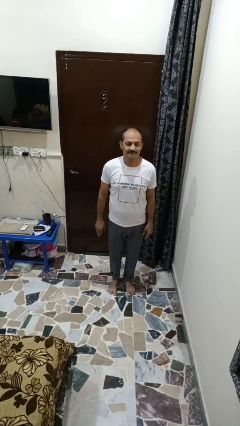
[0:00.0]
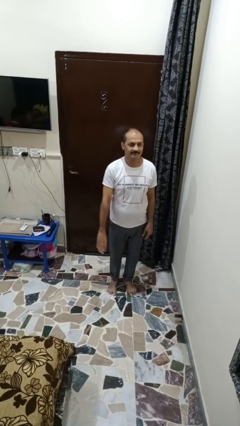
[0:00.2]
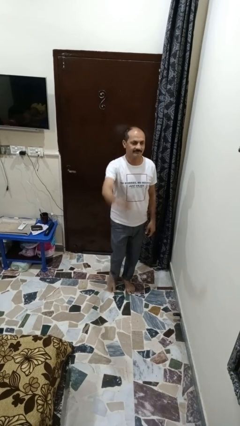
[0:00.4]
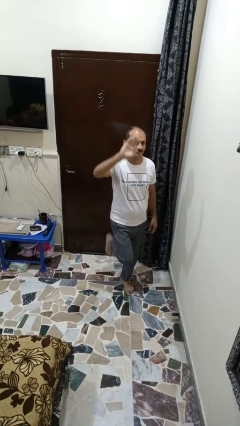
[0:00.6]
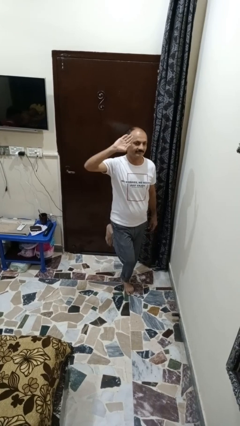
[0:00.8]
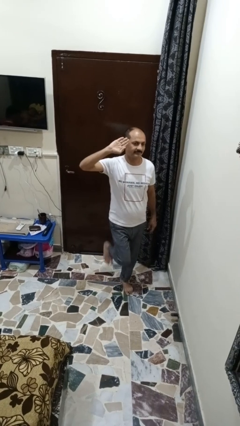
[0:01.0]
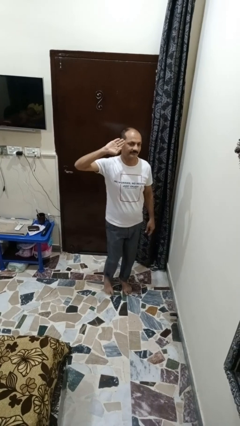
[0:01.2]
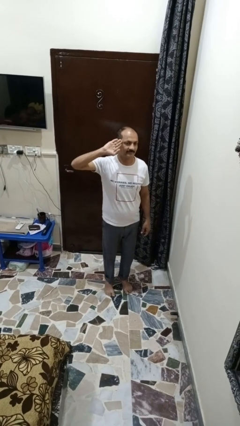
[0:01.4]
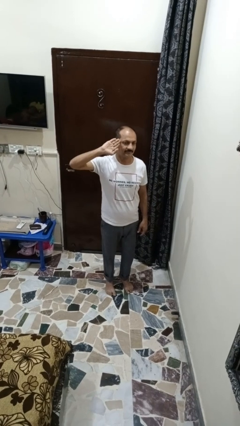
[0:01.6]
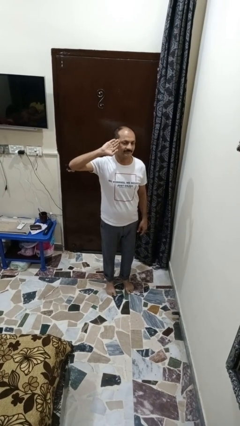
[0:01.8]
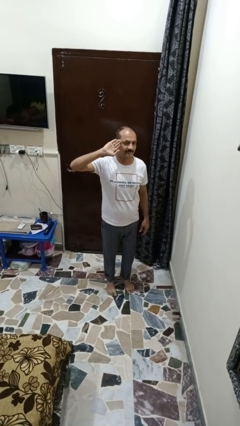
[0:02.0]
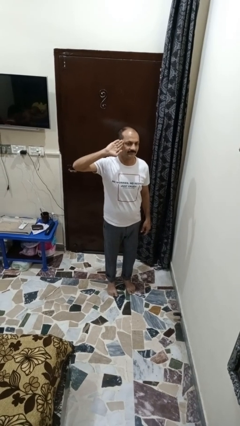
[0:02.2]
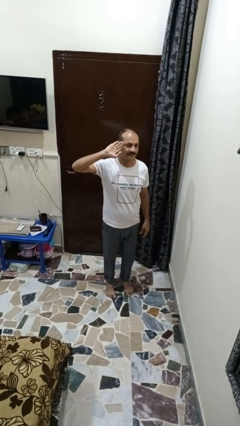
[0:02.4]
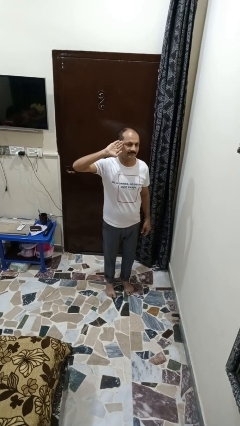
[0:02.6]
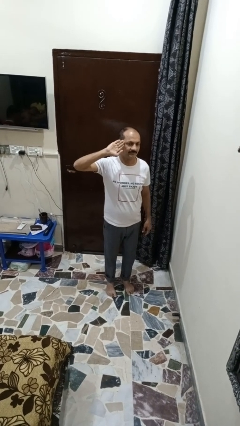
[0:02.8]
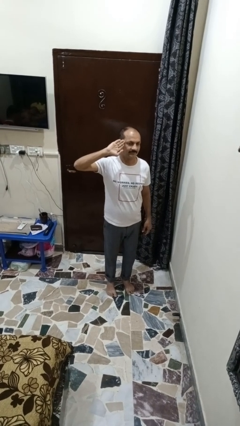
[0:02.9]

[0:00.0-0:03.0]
person salutes

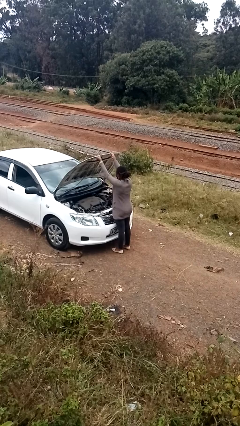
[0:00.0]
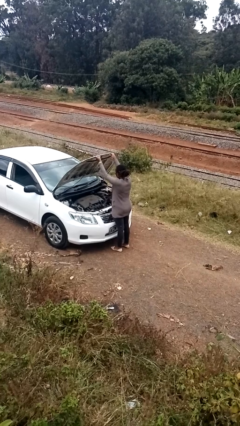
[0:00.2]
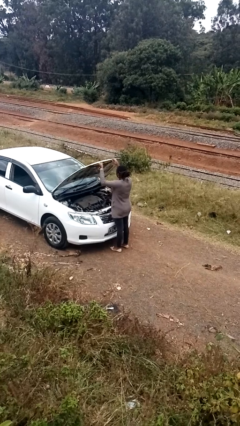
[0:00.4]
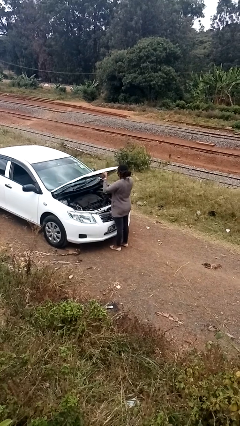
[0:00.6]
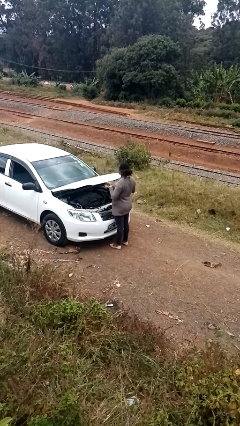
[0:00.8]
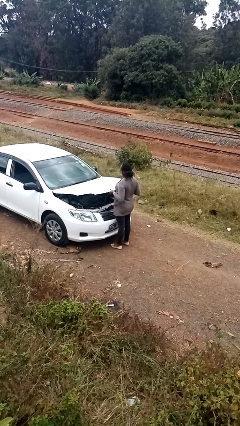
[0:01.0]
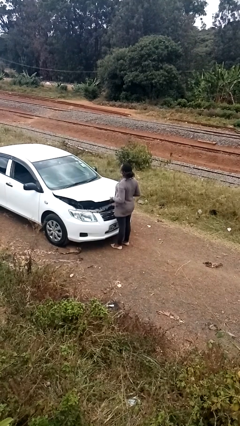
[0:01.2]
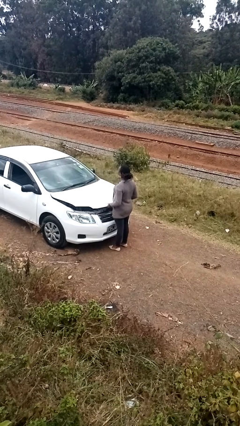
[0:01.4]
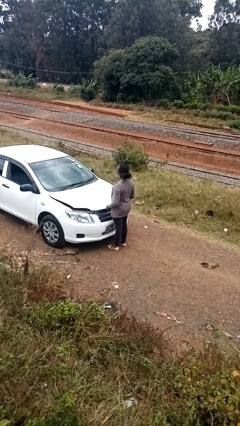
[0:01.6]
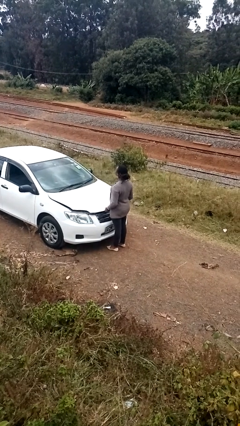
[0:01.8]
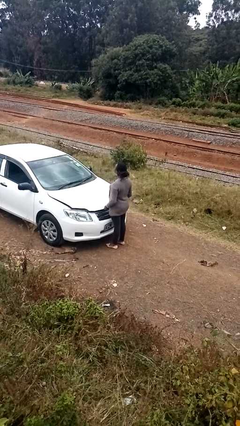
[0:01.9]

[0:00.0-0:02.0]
person closes car hood

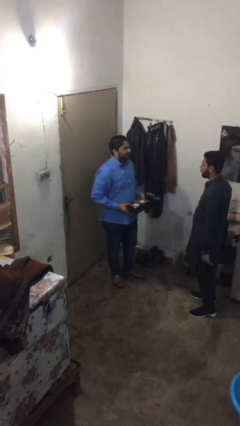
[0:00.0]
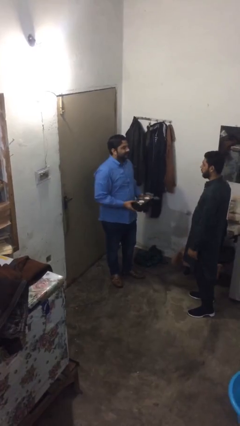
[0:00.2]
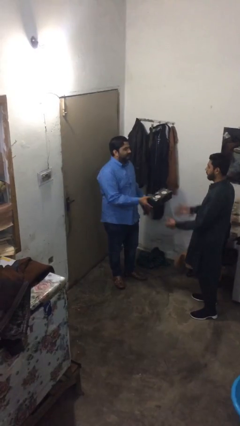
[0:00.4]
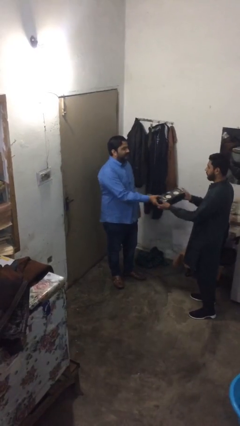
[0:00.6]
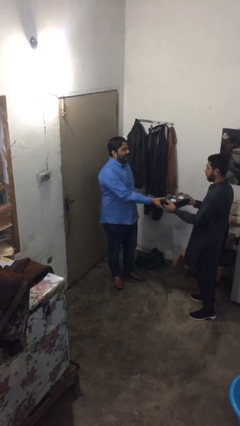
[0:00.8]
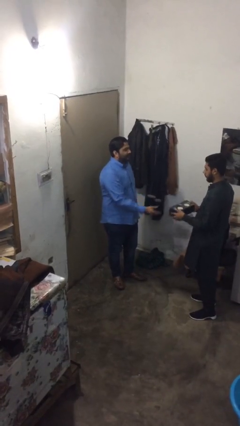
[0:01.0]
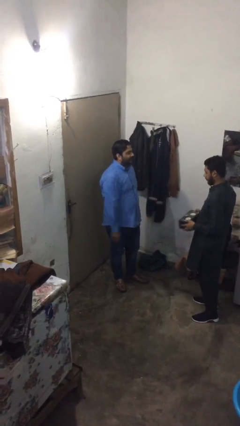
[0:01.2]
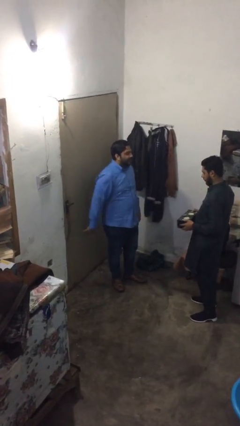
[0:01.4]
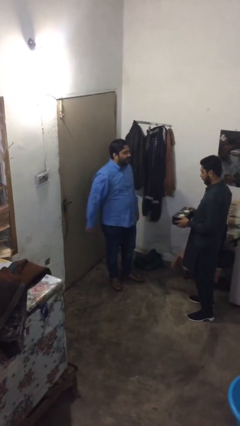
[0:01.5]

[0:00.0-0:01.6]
person transfers object to person

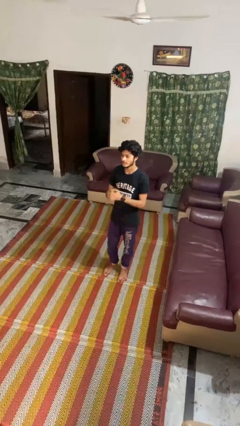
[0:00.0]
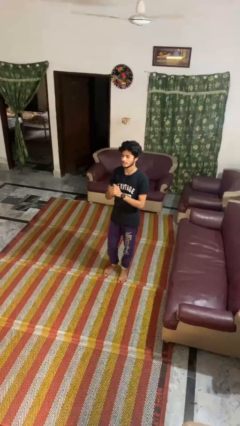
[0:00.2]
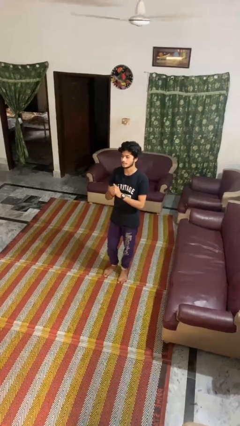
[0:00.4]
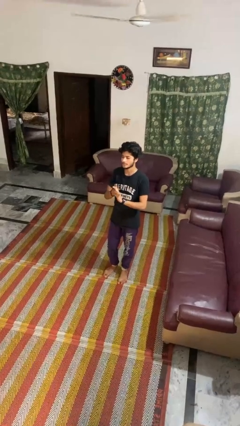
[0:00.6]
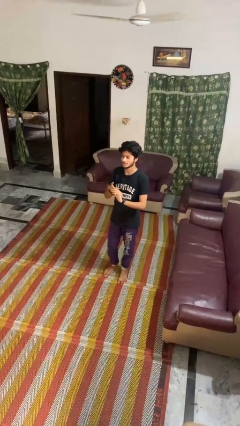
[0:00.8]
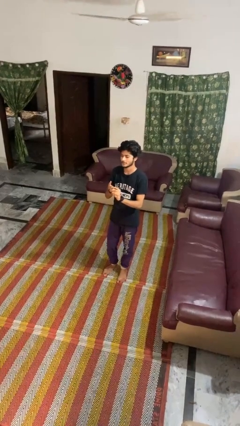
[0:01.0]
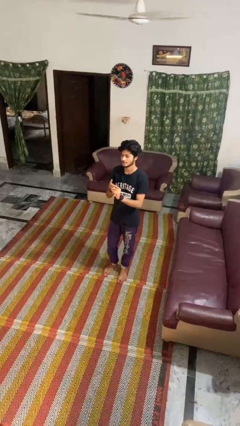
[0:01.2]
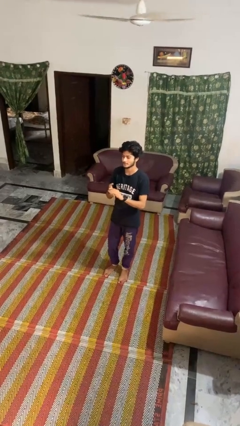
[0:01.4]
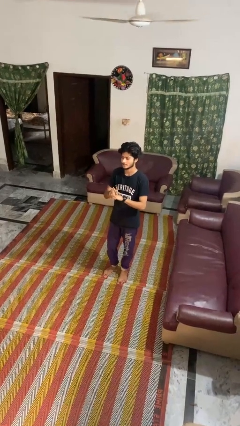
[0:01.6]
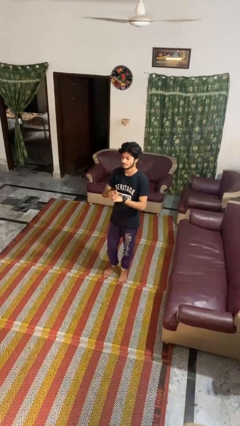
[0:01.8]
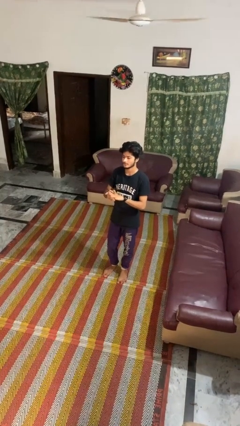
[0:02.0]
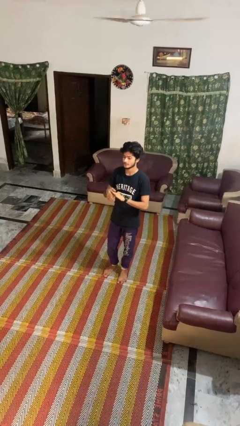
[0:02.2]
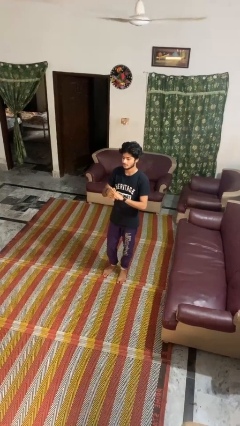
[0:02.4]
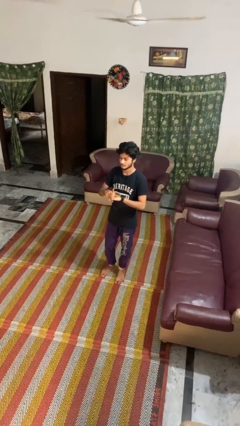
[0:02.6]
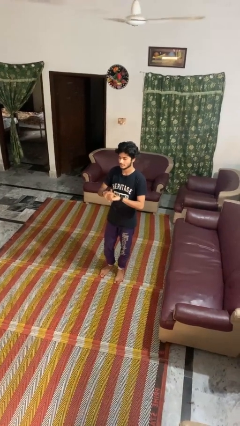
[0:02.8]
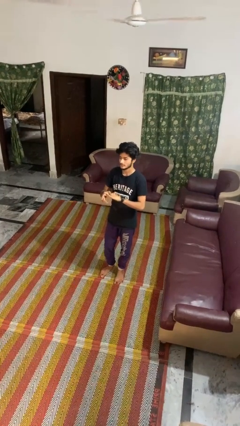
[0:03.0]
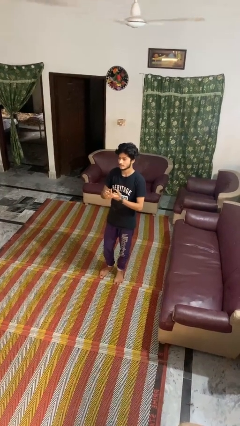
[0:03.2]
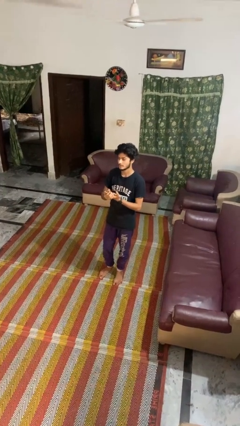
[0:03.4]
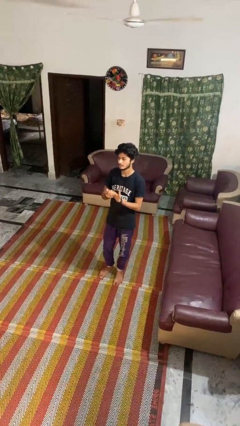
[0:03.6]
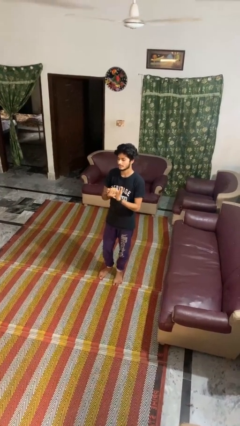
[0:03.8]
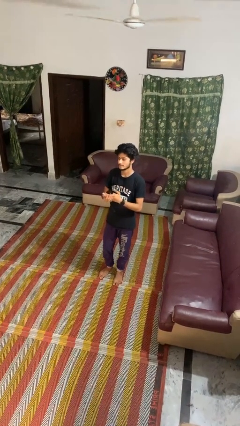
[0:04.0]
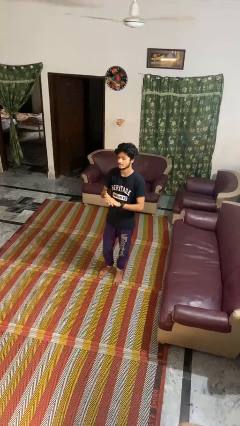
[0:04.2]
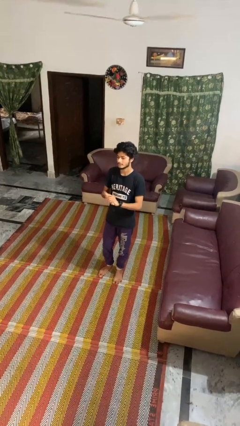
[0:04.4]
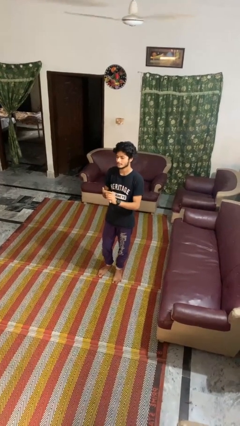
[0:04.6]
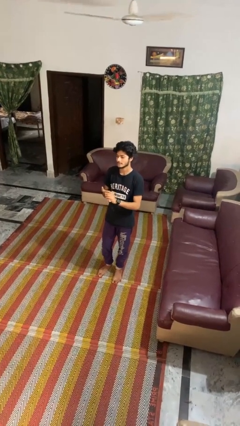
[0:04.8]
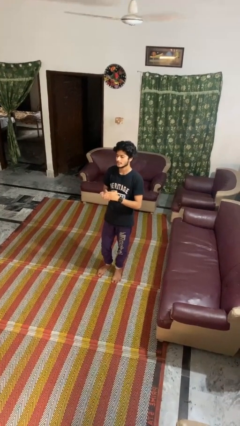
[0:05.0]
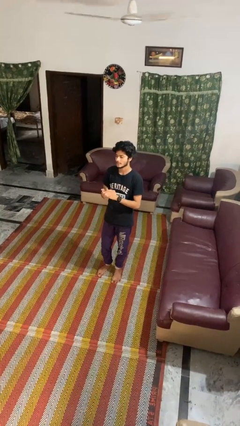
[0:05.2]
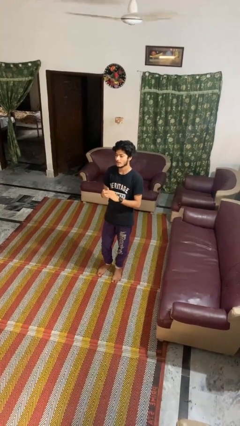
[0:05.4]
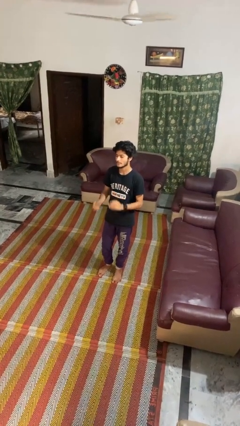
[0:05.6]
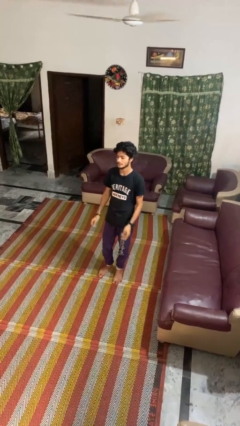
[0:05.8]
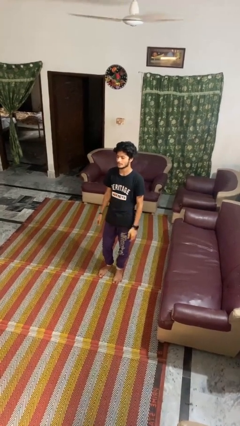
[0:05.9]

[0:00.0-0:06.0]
person cracks knuckles

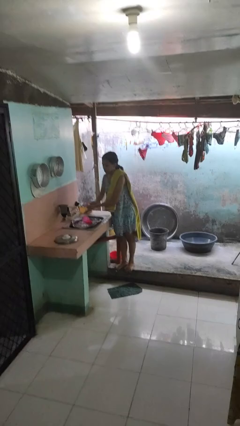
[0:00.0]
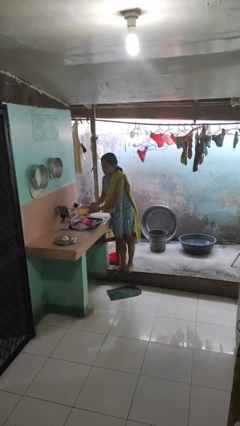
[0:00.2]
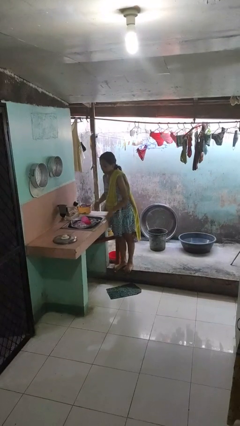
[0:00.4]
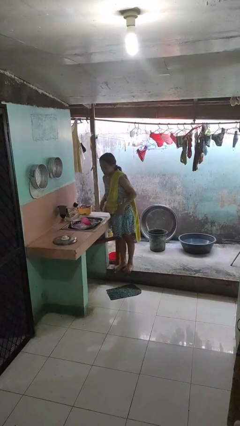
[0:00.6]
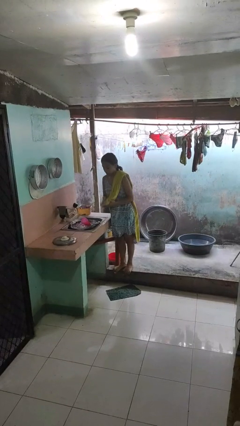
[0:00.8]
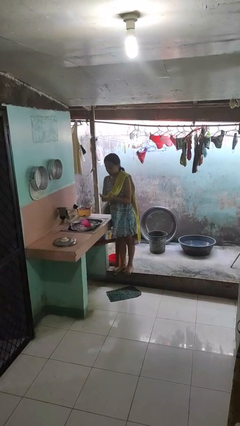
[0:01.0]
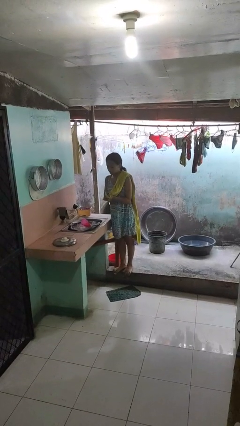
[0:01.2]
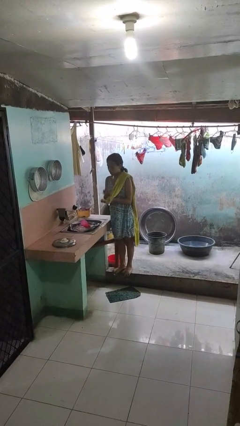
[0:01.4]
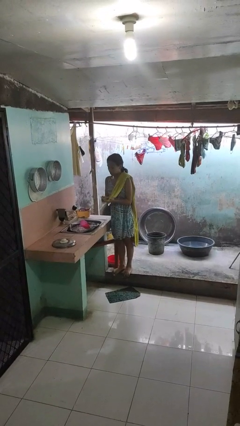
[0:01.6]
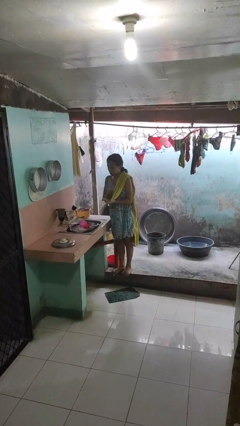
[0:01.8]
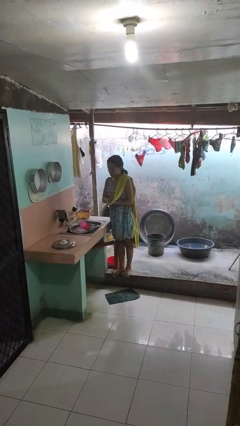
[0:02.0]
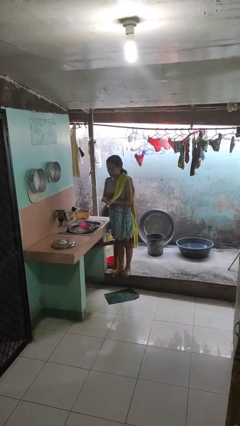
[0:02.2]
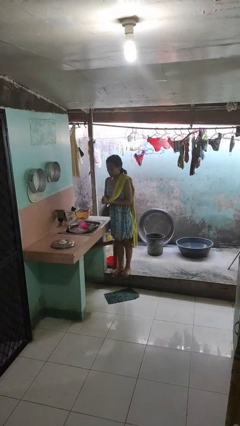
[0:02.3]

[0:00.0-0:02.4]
person dries hands with towel

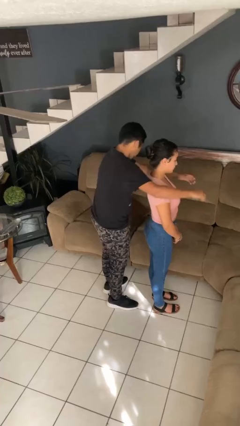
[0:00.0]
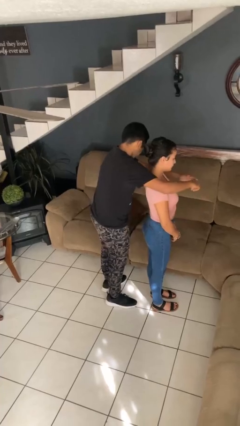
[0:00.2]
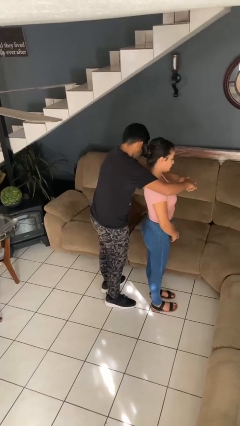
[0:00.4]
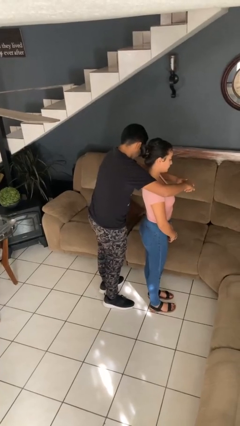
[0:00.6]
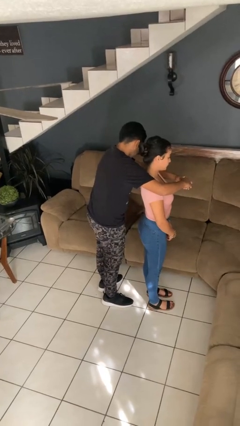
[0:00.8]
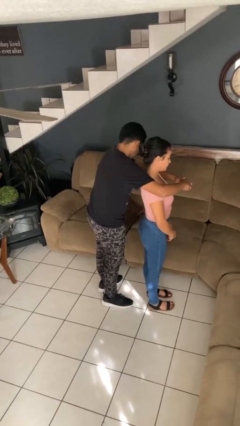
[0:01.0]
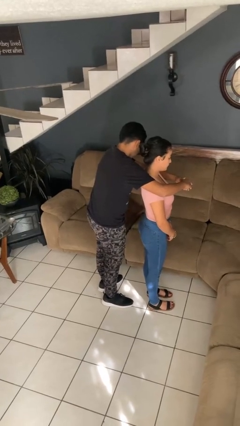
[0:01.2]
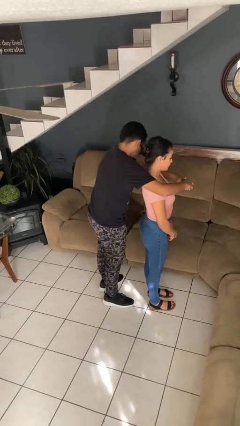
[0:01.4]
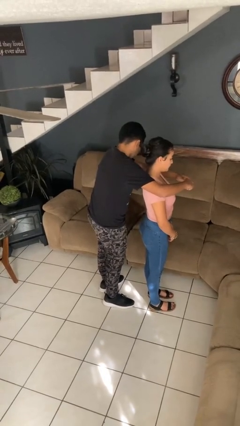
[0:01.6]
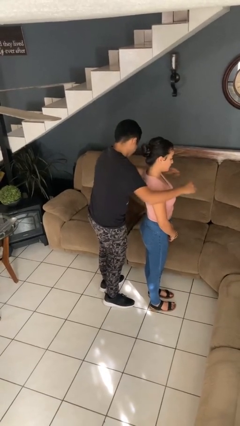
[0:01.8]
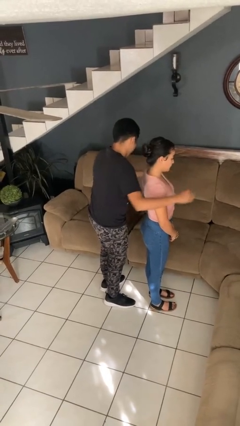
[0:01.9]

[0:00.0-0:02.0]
person hugs person from behind

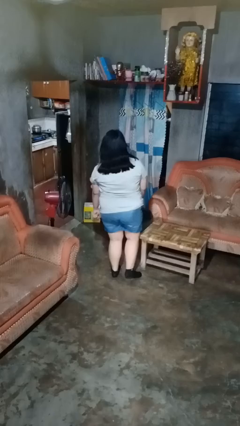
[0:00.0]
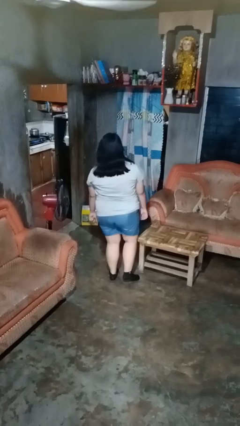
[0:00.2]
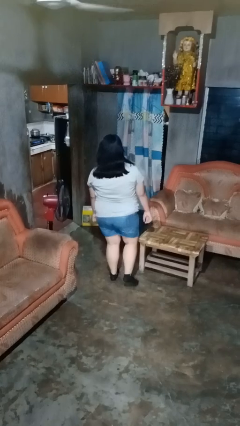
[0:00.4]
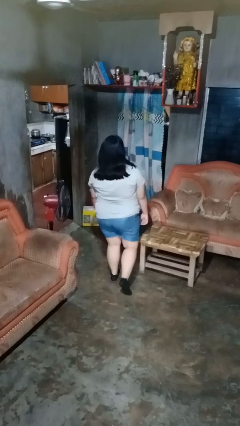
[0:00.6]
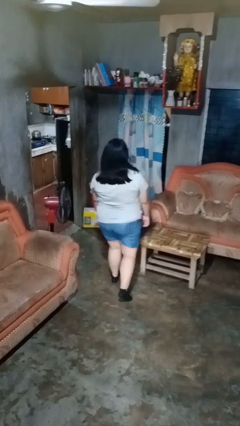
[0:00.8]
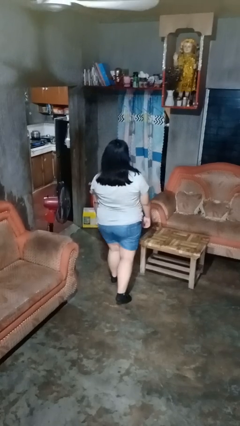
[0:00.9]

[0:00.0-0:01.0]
person bumps into table
